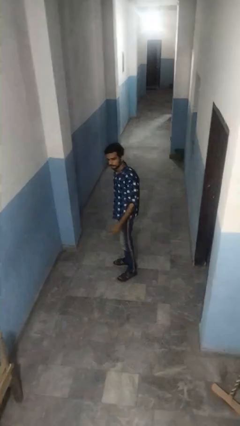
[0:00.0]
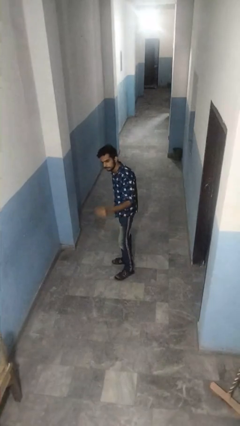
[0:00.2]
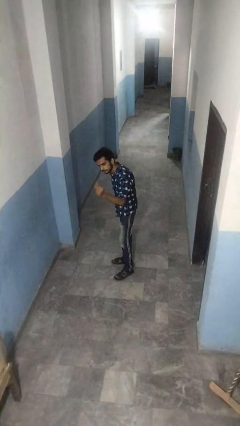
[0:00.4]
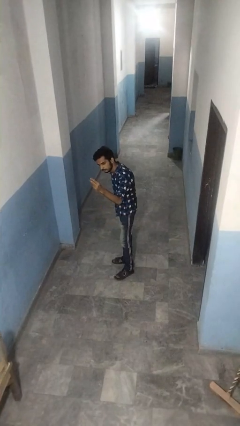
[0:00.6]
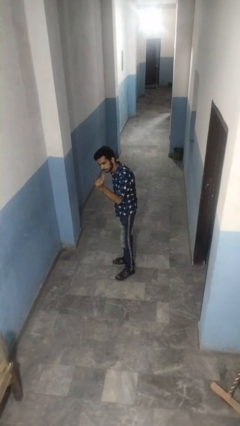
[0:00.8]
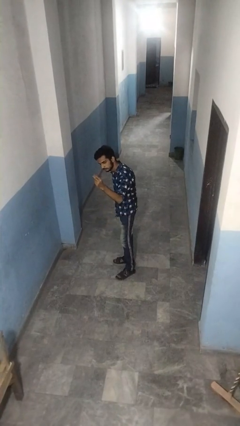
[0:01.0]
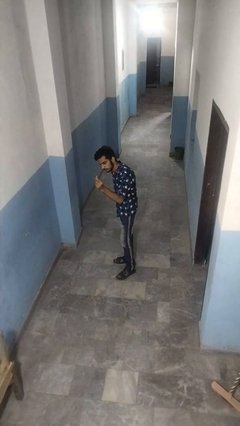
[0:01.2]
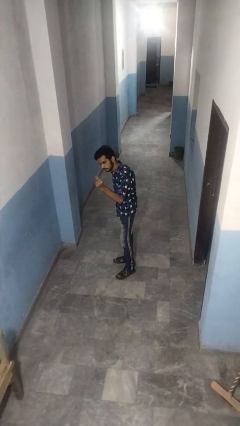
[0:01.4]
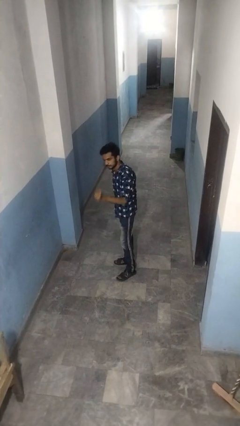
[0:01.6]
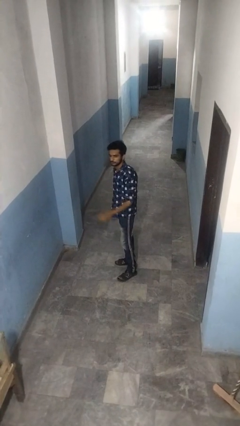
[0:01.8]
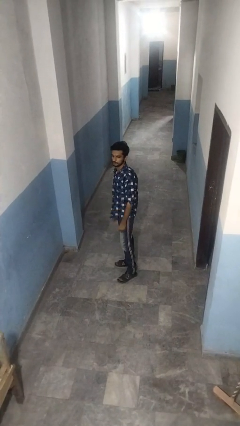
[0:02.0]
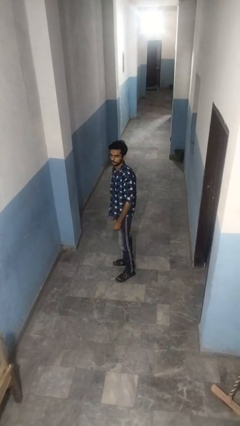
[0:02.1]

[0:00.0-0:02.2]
person snaps fingers

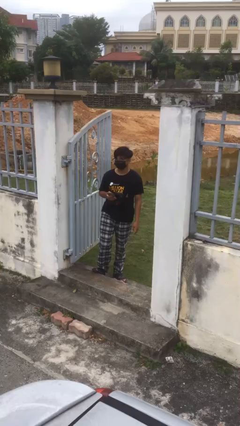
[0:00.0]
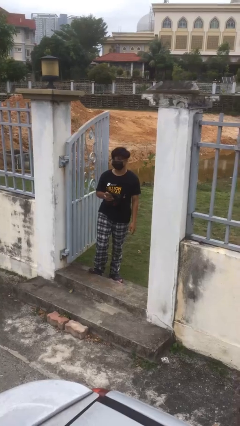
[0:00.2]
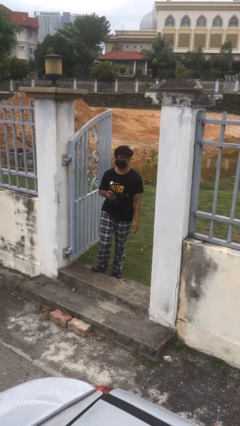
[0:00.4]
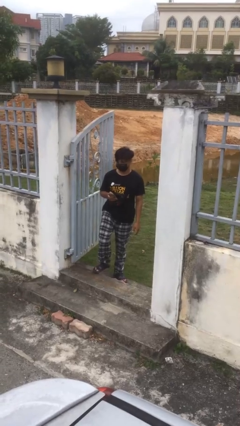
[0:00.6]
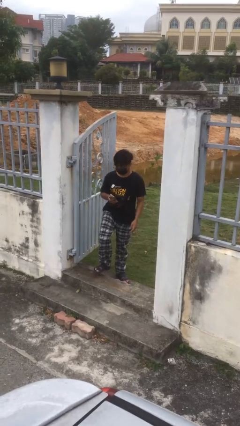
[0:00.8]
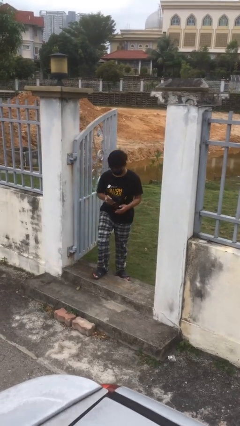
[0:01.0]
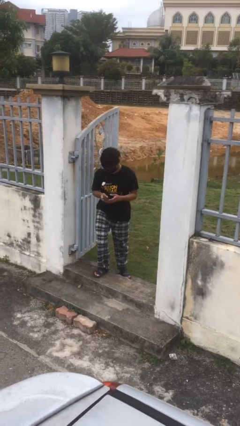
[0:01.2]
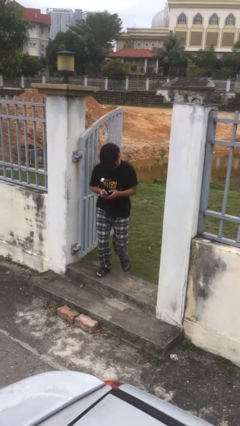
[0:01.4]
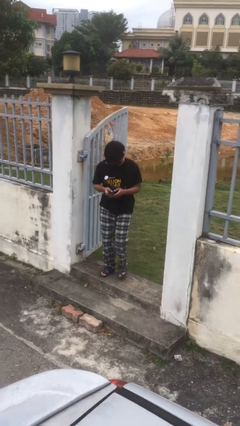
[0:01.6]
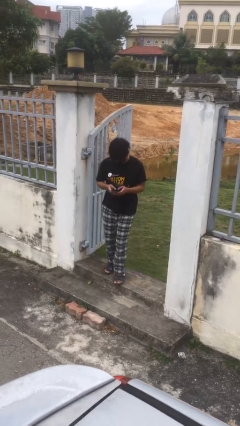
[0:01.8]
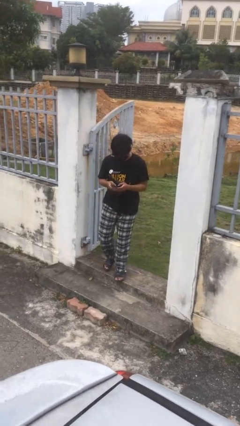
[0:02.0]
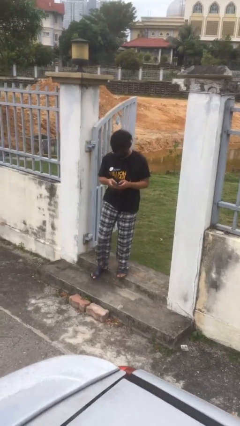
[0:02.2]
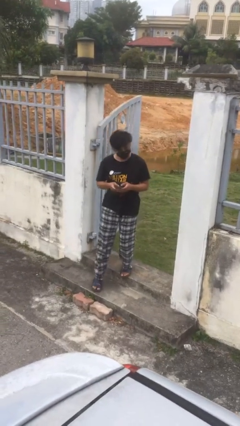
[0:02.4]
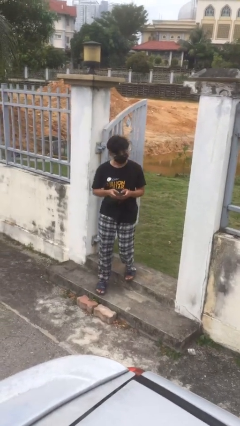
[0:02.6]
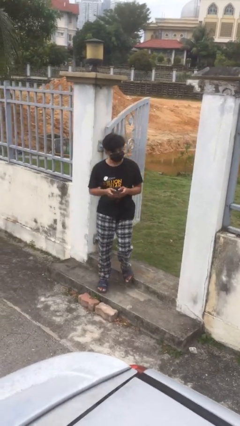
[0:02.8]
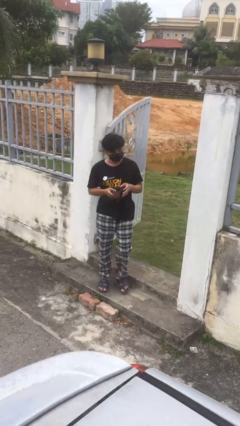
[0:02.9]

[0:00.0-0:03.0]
person enters scene through structure

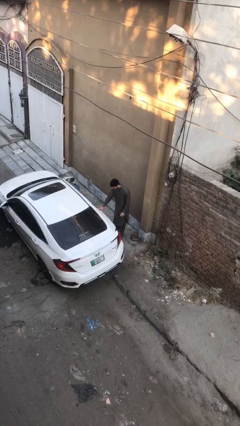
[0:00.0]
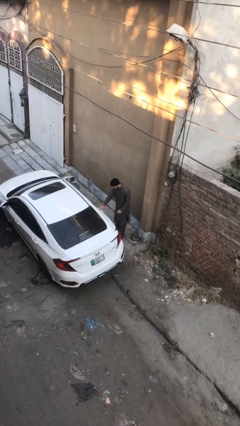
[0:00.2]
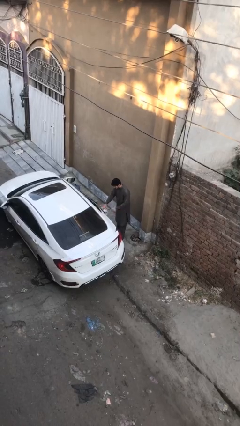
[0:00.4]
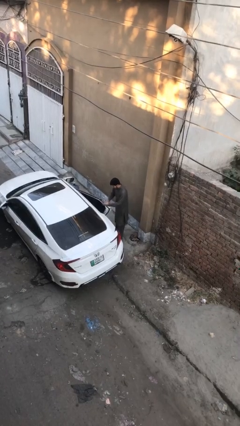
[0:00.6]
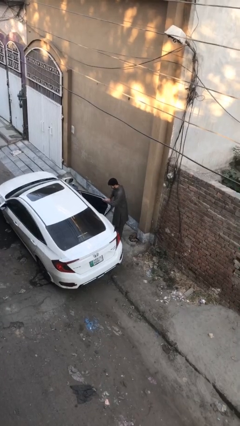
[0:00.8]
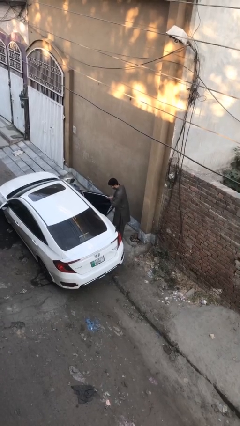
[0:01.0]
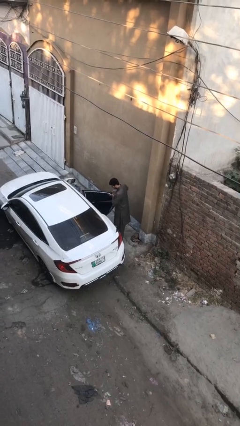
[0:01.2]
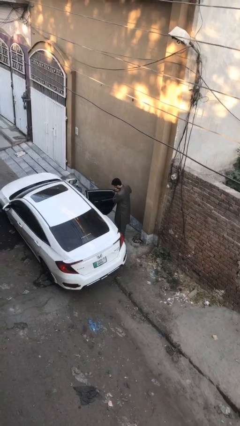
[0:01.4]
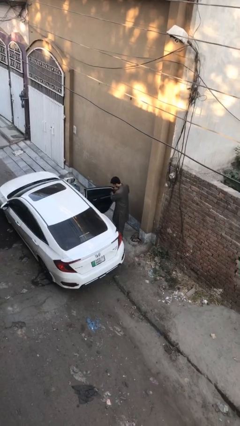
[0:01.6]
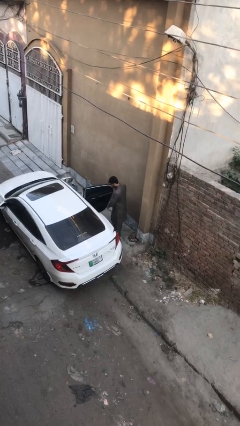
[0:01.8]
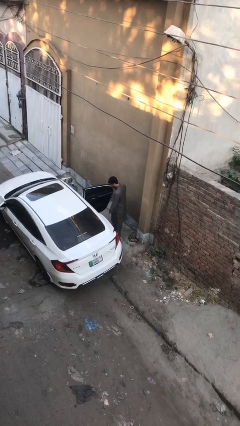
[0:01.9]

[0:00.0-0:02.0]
person opens car door

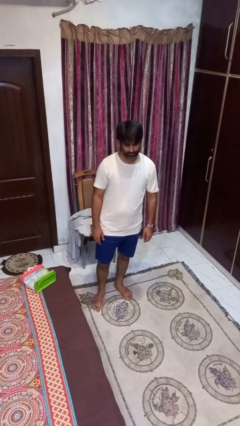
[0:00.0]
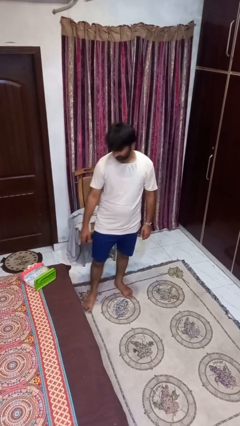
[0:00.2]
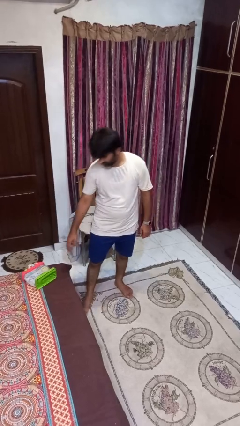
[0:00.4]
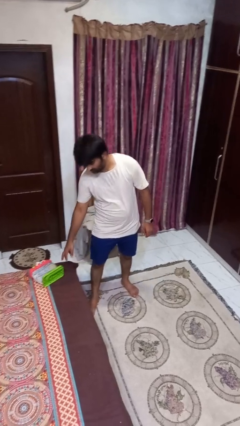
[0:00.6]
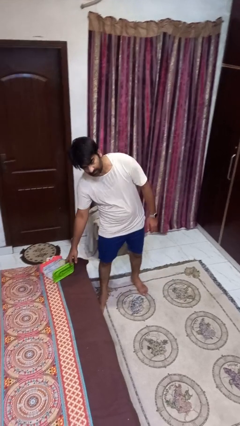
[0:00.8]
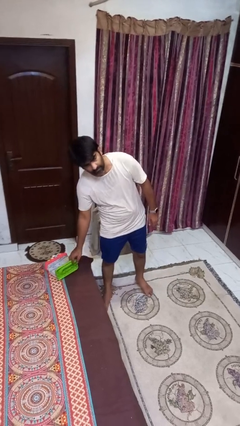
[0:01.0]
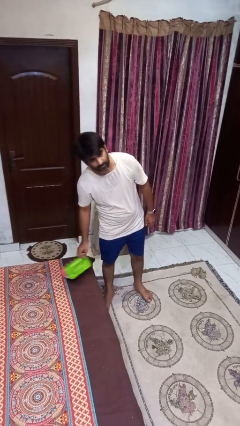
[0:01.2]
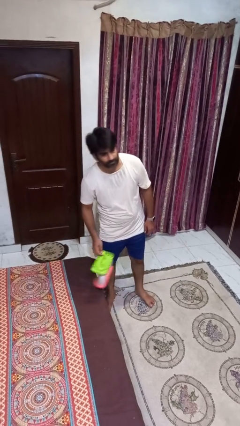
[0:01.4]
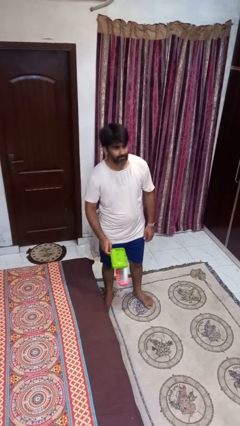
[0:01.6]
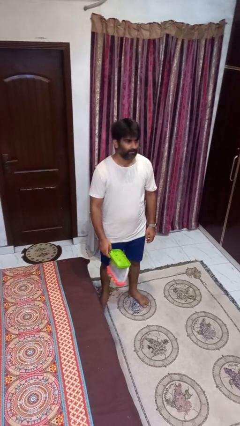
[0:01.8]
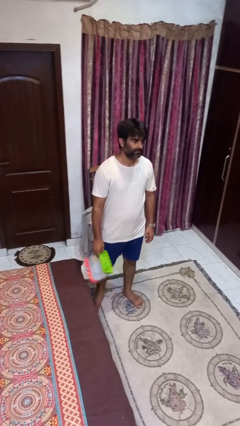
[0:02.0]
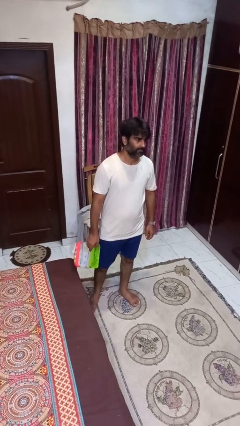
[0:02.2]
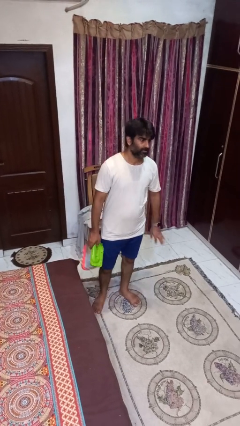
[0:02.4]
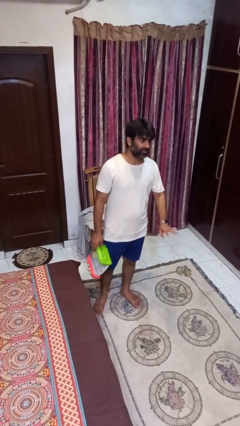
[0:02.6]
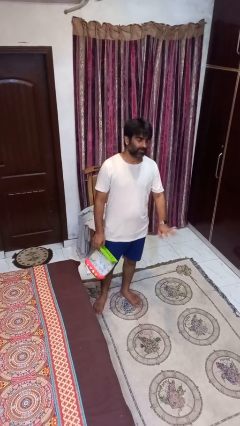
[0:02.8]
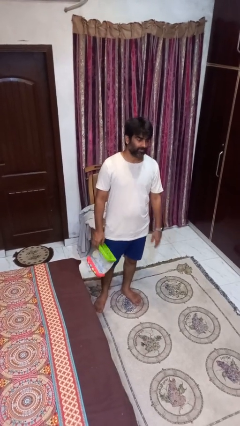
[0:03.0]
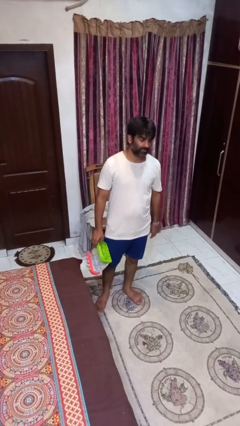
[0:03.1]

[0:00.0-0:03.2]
person picks up object from bed

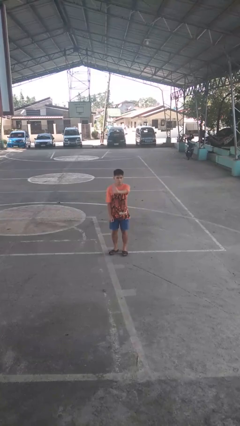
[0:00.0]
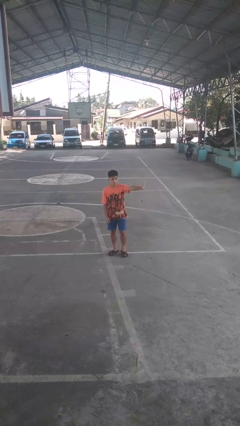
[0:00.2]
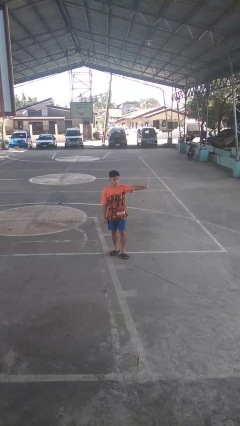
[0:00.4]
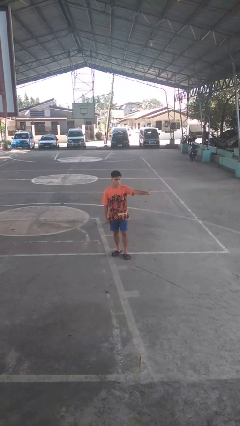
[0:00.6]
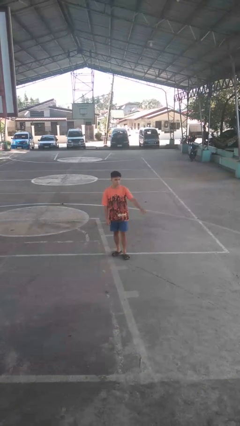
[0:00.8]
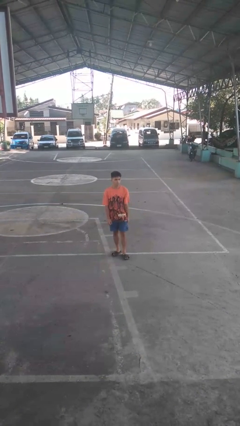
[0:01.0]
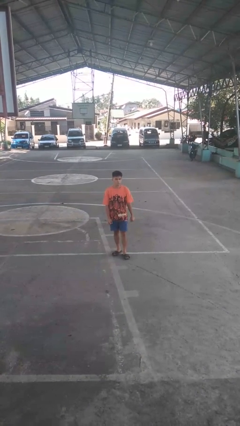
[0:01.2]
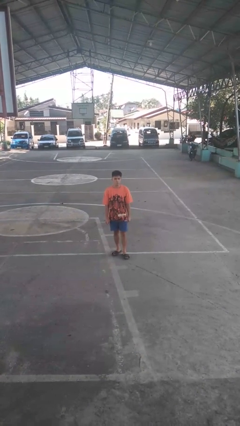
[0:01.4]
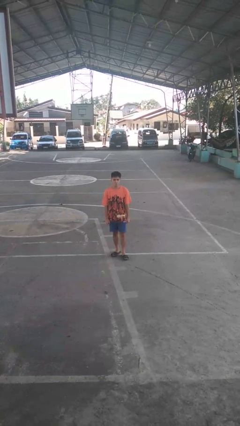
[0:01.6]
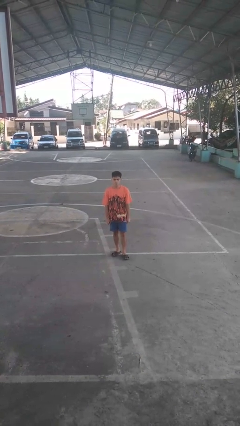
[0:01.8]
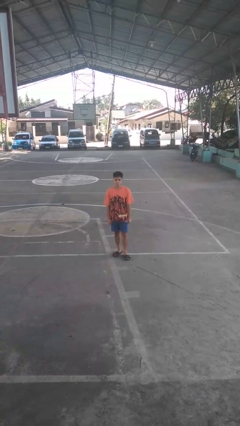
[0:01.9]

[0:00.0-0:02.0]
person gestures swipe left

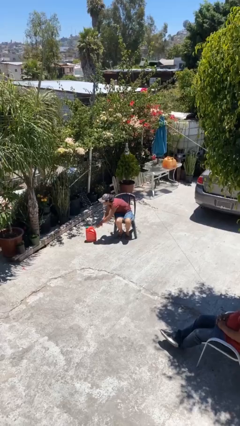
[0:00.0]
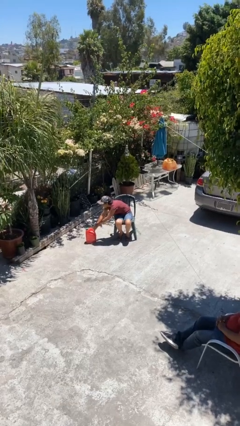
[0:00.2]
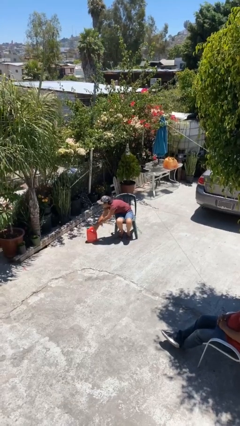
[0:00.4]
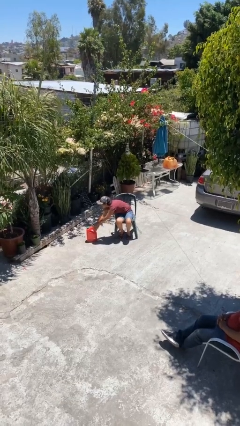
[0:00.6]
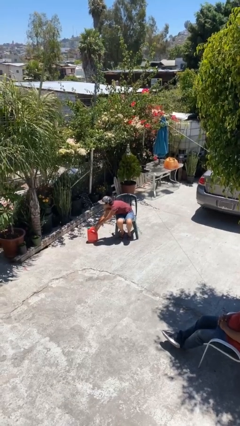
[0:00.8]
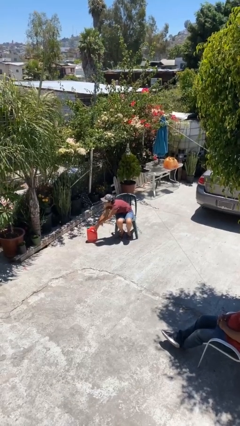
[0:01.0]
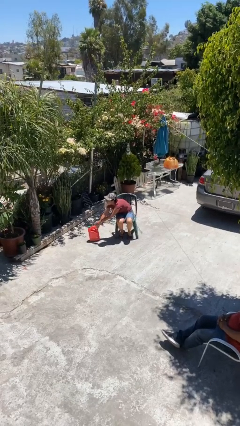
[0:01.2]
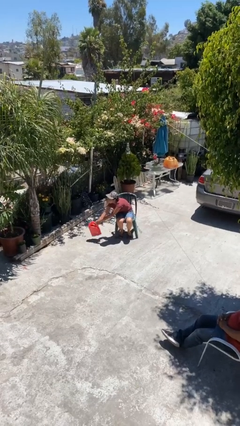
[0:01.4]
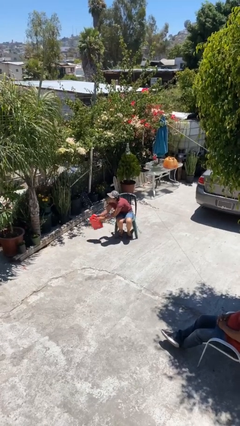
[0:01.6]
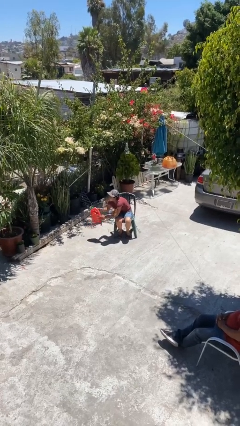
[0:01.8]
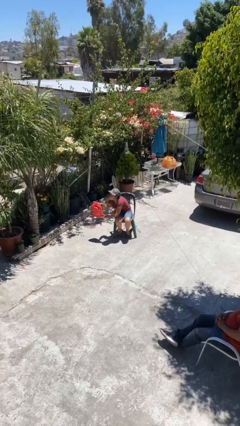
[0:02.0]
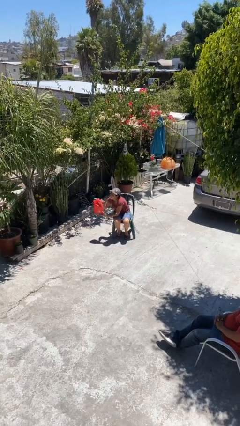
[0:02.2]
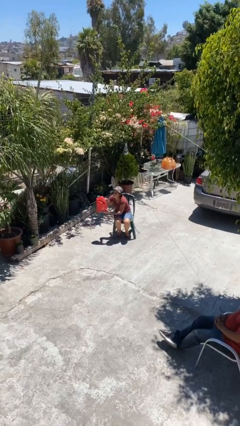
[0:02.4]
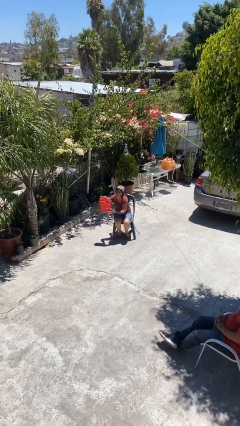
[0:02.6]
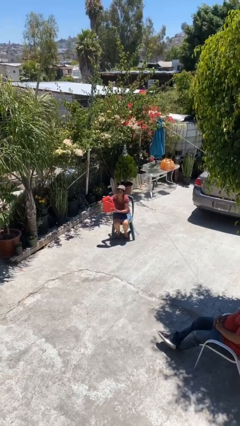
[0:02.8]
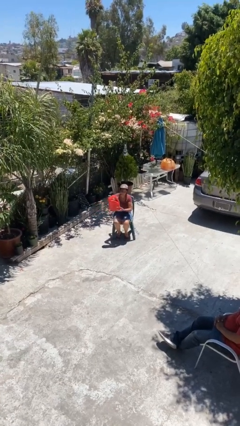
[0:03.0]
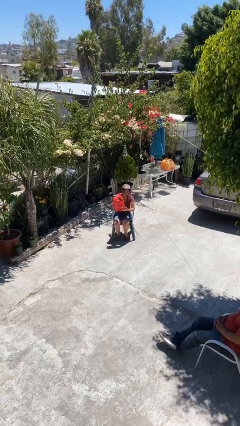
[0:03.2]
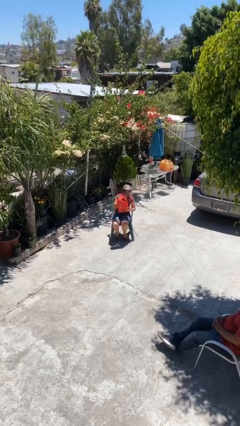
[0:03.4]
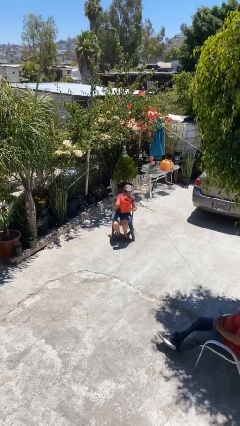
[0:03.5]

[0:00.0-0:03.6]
person picks up object from floor

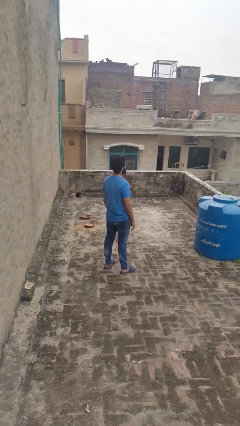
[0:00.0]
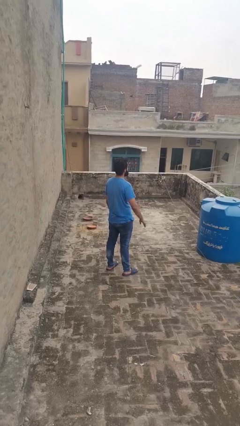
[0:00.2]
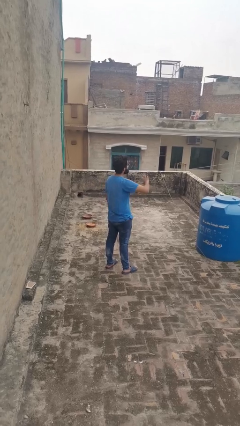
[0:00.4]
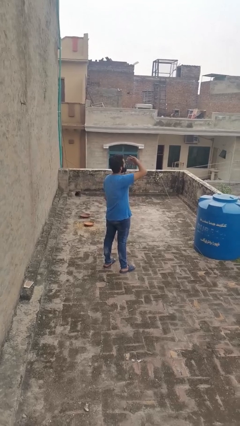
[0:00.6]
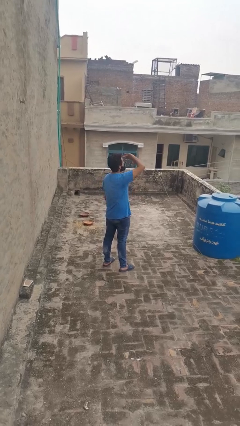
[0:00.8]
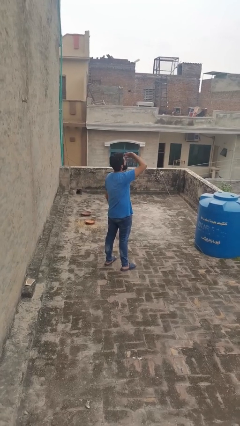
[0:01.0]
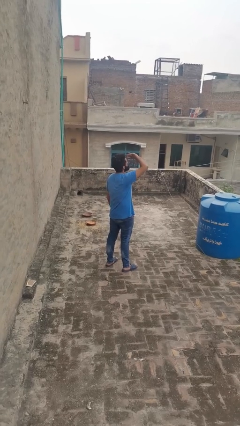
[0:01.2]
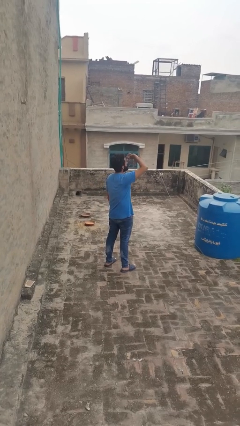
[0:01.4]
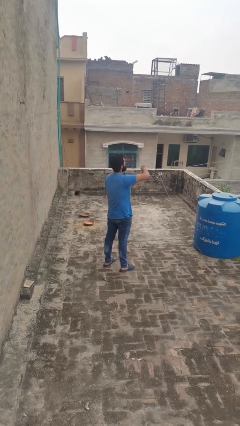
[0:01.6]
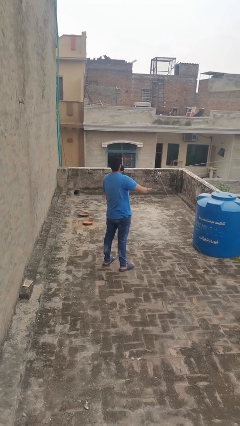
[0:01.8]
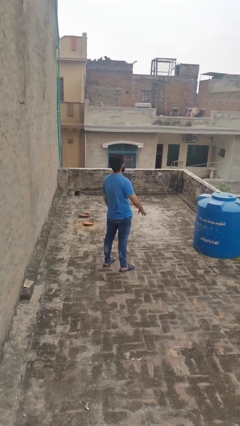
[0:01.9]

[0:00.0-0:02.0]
person shades eyes
